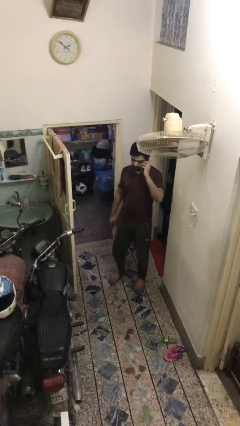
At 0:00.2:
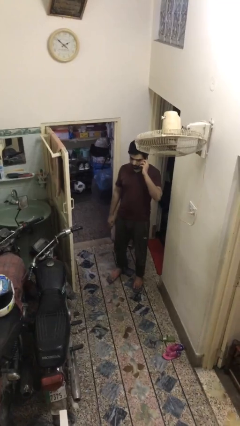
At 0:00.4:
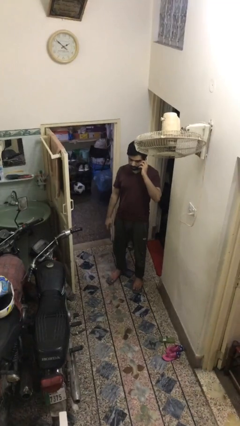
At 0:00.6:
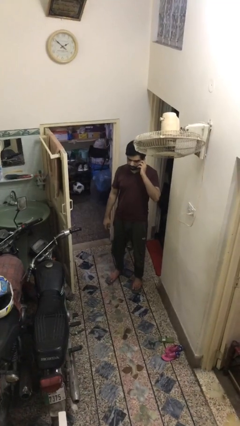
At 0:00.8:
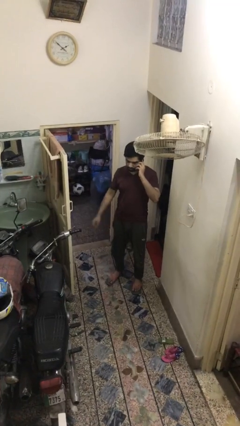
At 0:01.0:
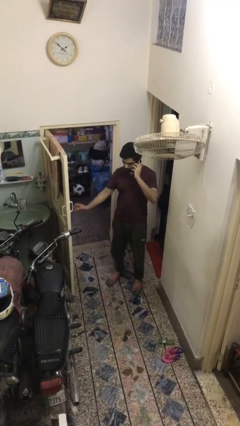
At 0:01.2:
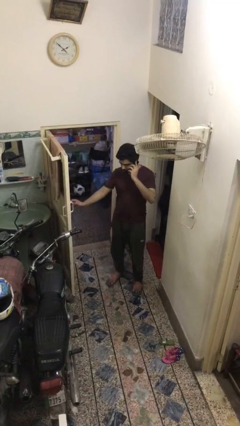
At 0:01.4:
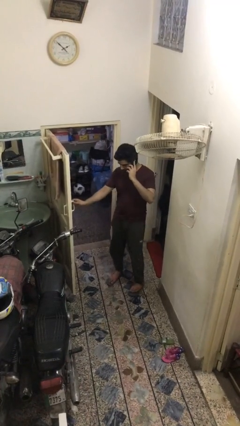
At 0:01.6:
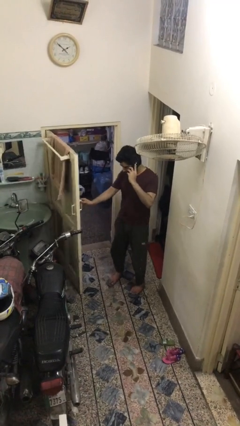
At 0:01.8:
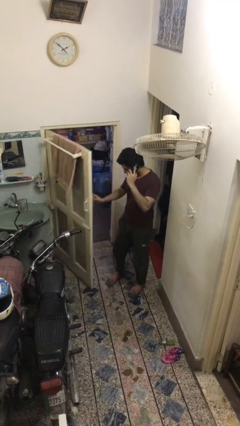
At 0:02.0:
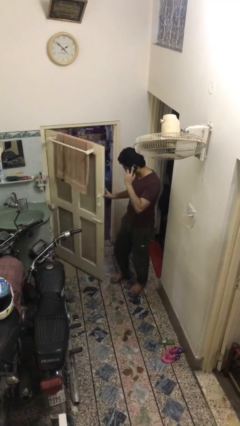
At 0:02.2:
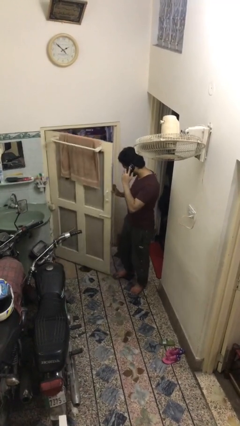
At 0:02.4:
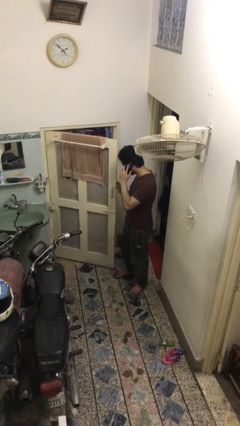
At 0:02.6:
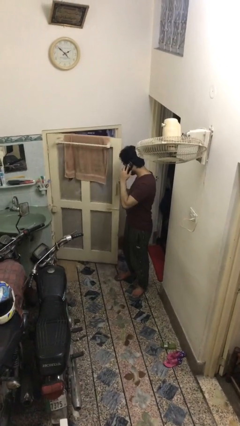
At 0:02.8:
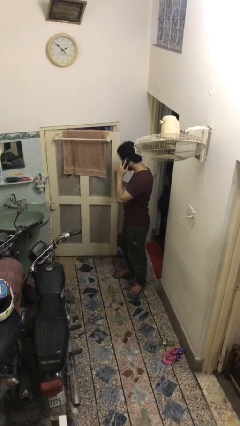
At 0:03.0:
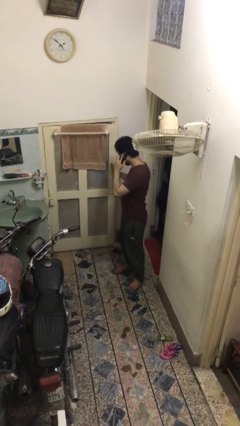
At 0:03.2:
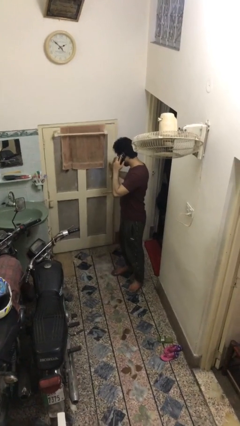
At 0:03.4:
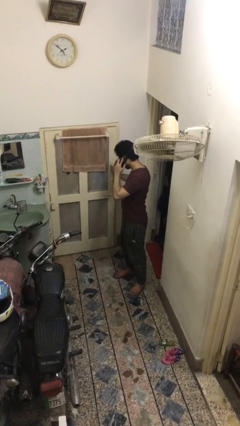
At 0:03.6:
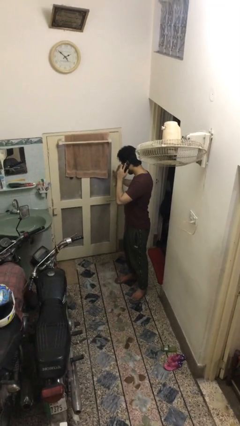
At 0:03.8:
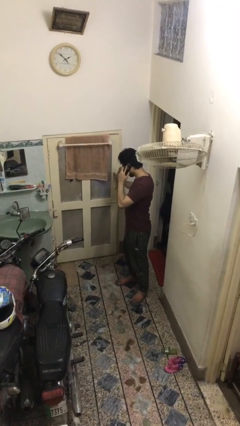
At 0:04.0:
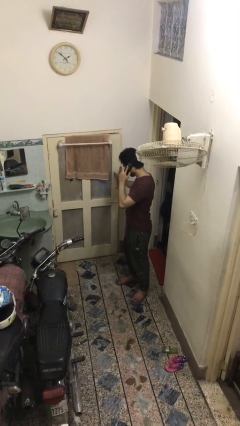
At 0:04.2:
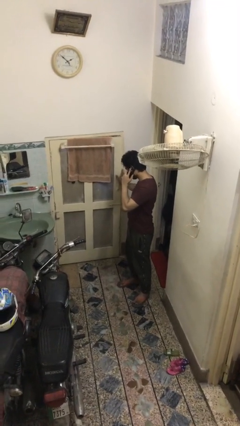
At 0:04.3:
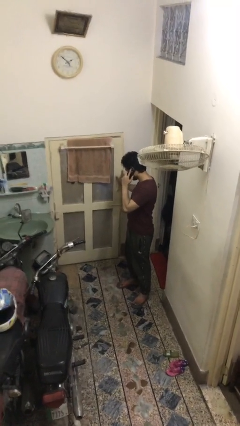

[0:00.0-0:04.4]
person closes facility door

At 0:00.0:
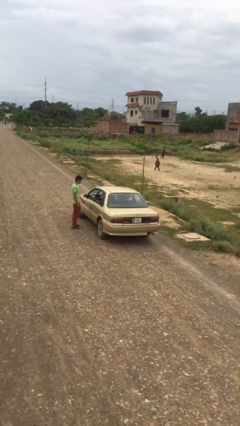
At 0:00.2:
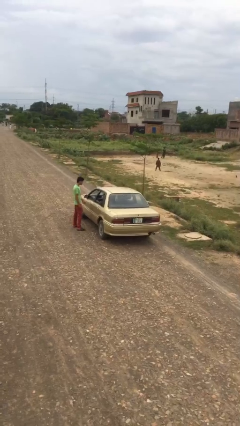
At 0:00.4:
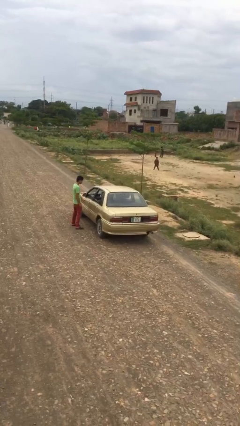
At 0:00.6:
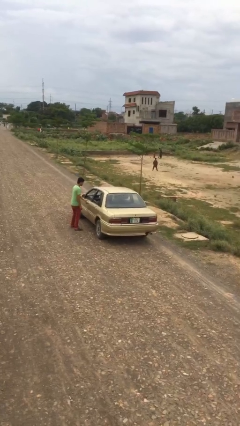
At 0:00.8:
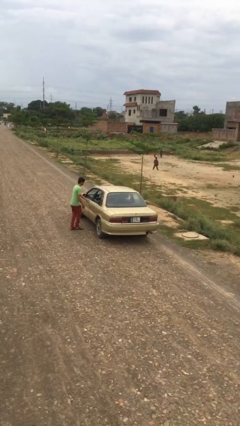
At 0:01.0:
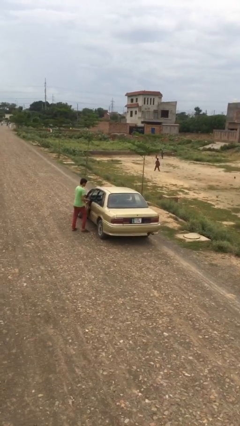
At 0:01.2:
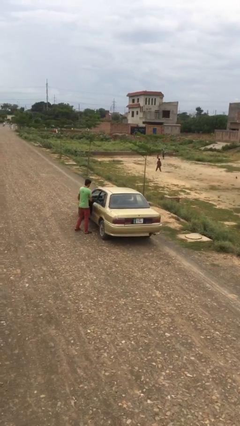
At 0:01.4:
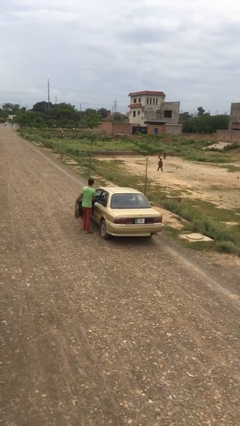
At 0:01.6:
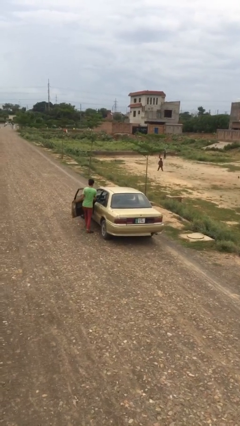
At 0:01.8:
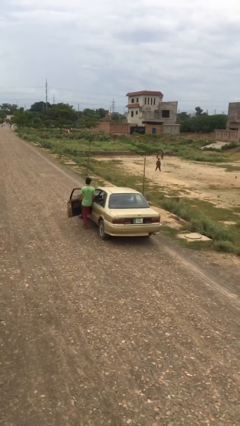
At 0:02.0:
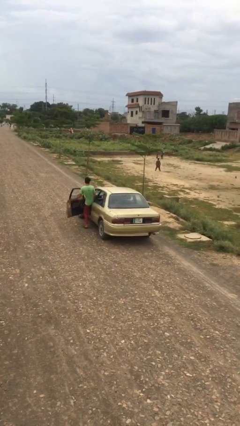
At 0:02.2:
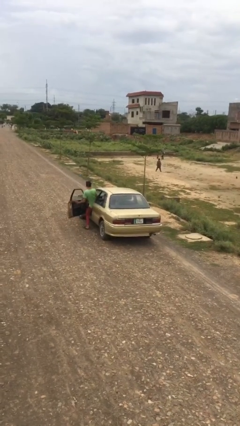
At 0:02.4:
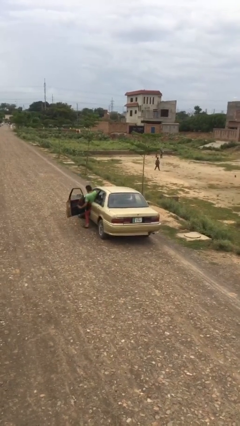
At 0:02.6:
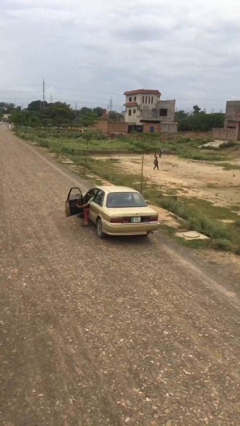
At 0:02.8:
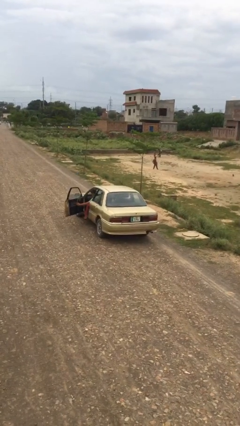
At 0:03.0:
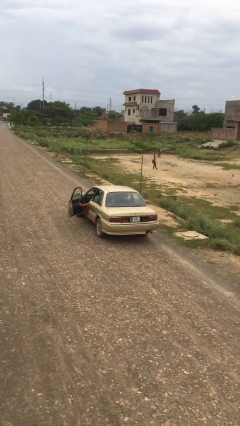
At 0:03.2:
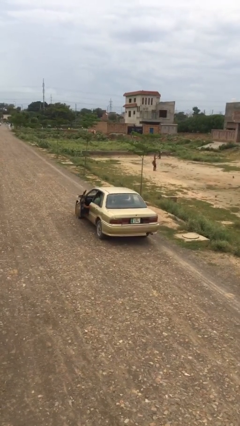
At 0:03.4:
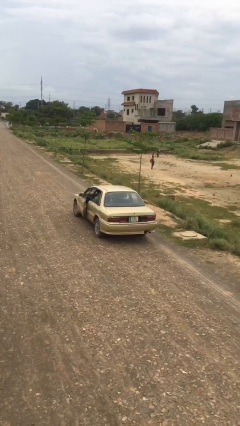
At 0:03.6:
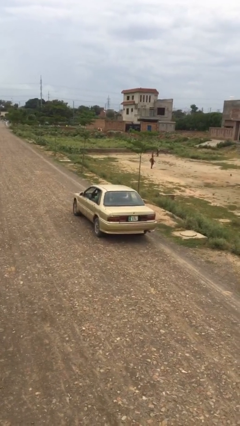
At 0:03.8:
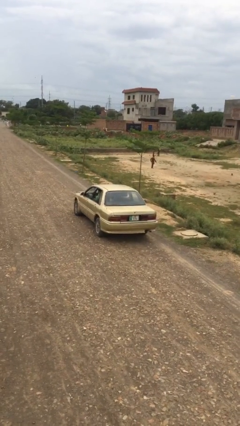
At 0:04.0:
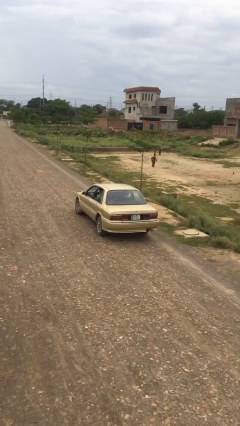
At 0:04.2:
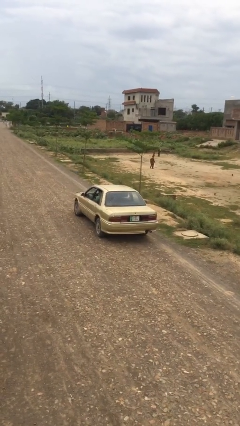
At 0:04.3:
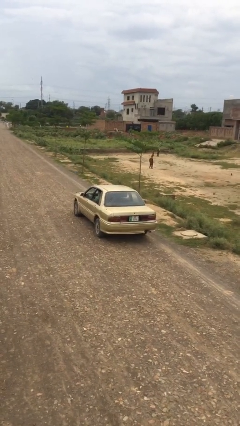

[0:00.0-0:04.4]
car picks up person

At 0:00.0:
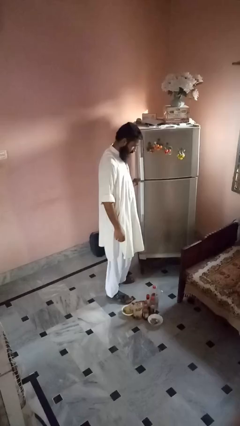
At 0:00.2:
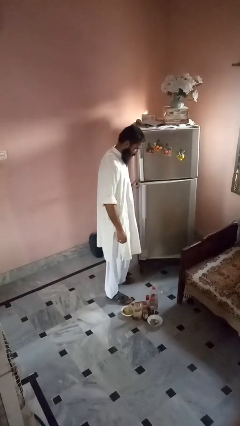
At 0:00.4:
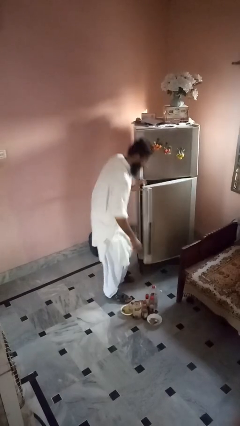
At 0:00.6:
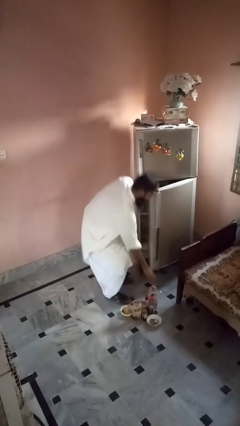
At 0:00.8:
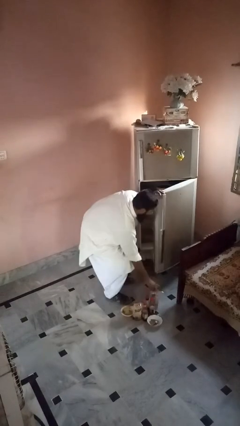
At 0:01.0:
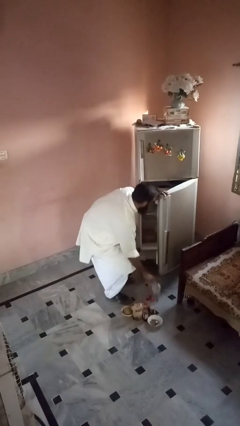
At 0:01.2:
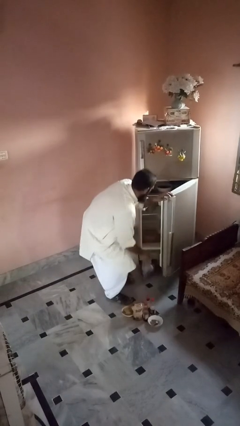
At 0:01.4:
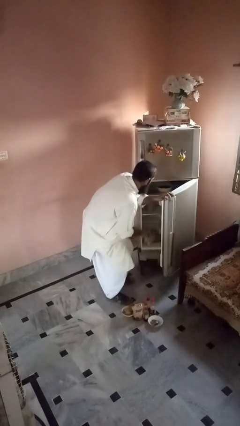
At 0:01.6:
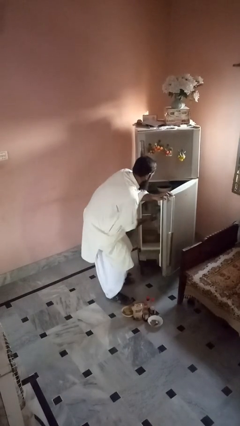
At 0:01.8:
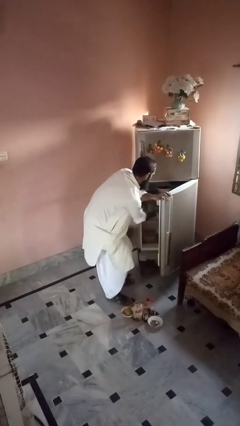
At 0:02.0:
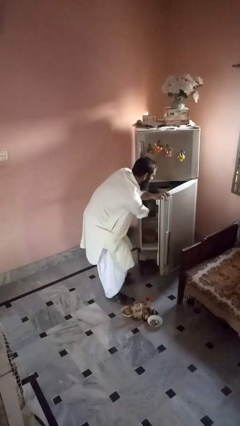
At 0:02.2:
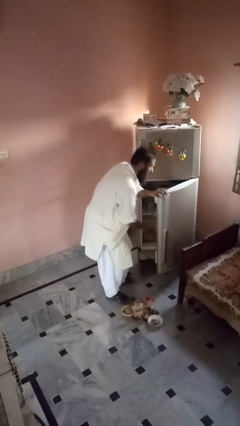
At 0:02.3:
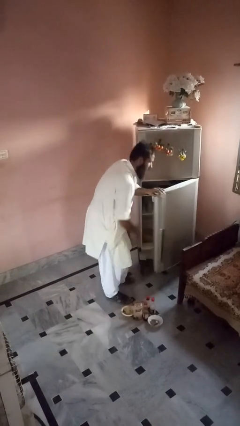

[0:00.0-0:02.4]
person loads groceries into refrigerator

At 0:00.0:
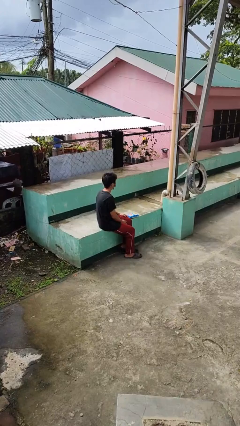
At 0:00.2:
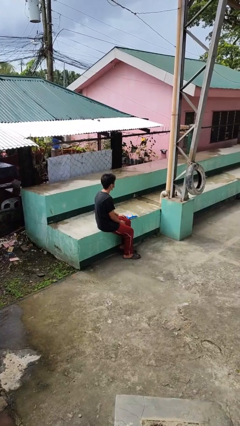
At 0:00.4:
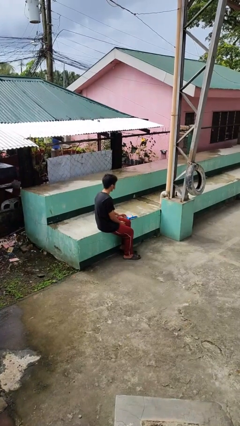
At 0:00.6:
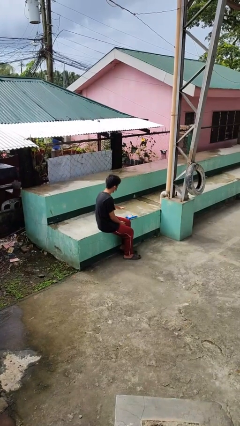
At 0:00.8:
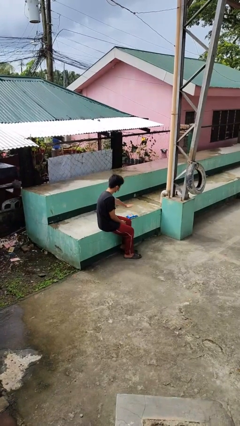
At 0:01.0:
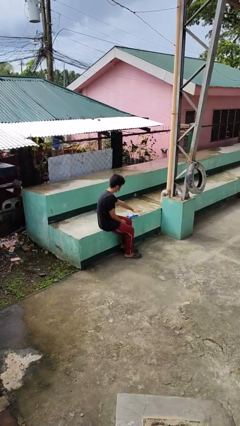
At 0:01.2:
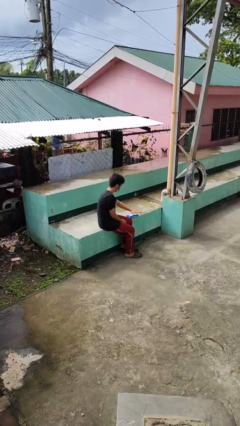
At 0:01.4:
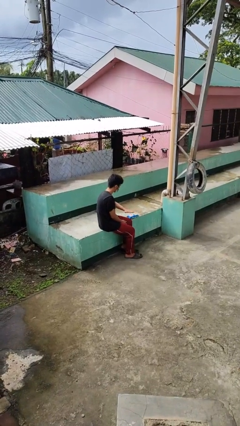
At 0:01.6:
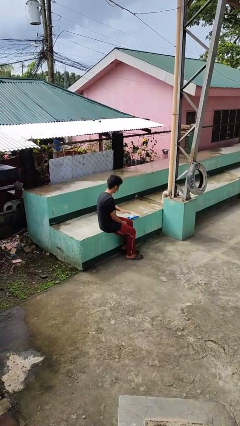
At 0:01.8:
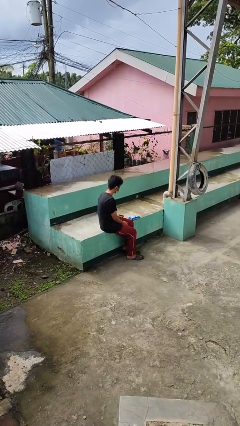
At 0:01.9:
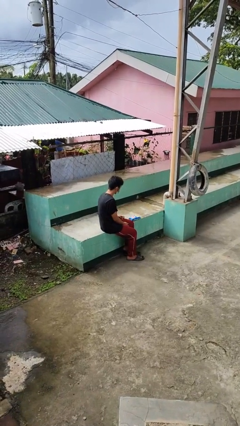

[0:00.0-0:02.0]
person waves hand over object

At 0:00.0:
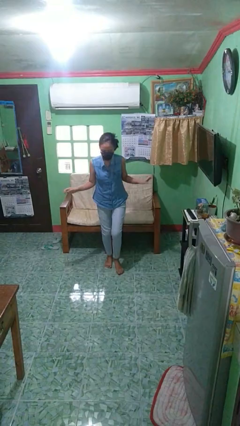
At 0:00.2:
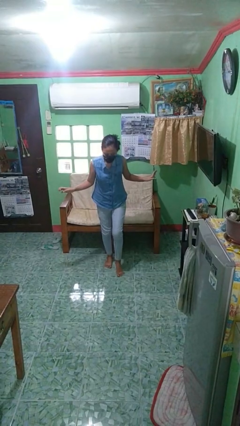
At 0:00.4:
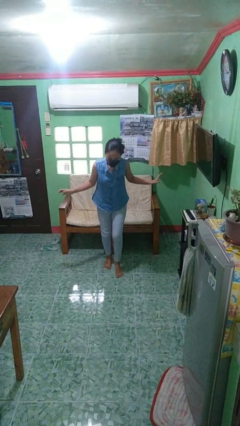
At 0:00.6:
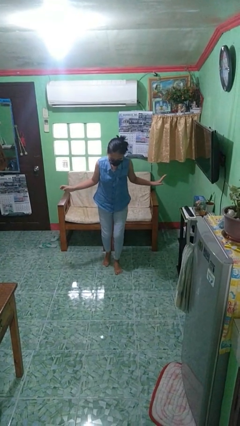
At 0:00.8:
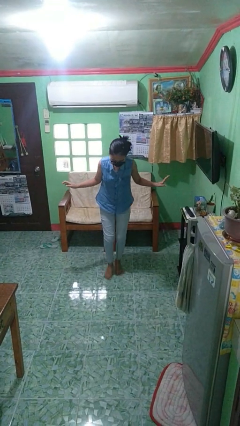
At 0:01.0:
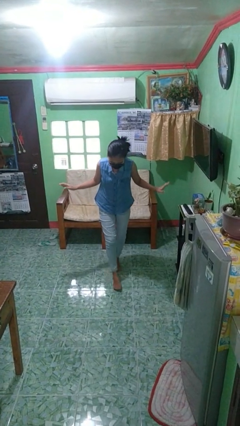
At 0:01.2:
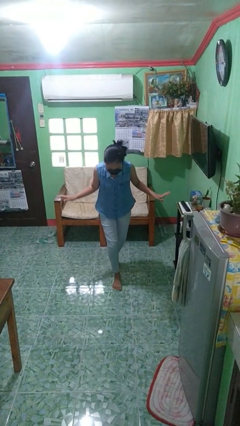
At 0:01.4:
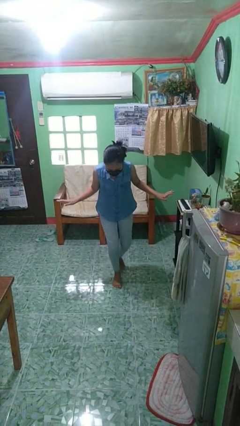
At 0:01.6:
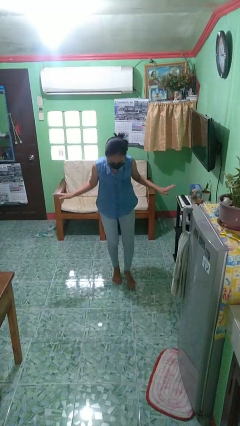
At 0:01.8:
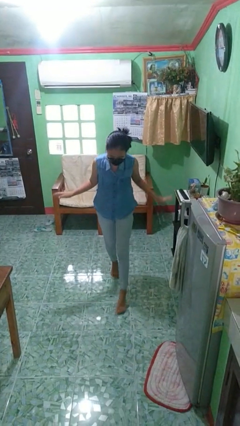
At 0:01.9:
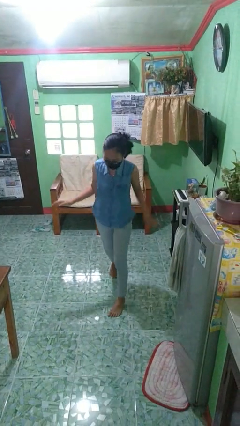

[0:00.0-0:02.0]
person walks tiptoe

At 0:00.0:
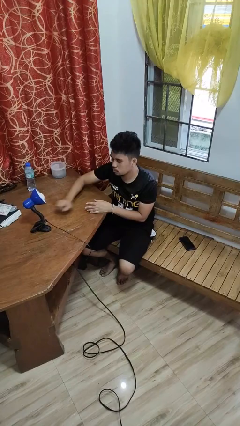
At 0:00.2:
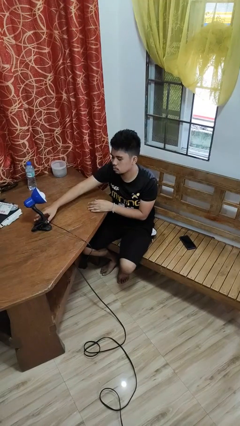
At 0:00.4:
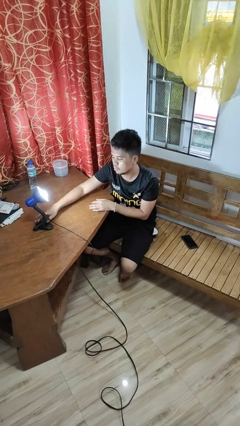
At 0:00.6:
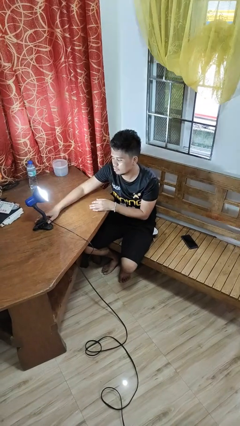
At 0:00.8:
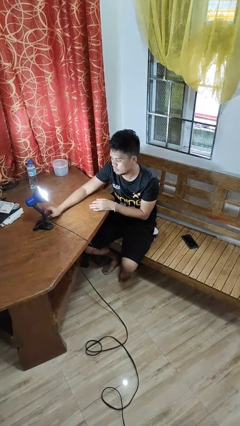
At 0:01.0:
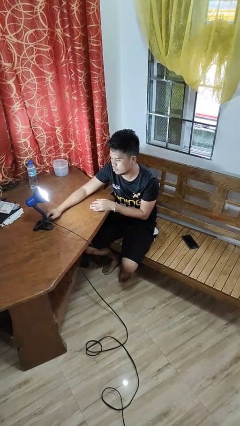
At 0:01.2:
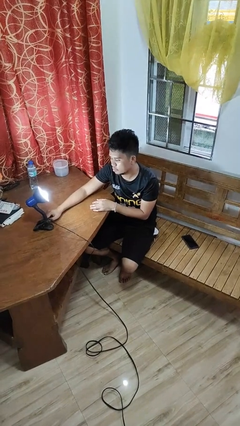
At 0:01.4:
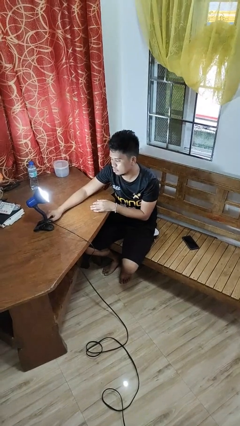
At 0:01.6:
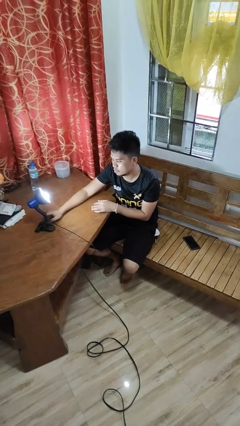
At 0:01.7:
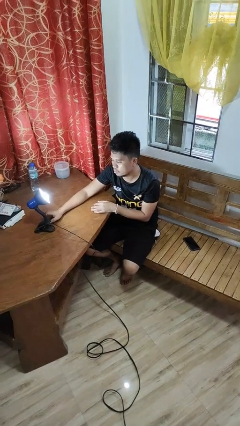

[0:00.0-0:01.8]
person turns on lamp
